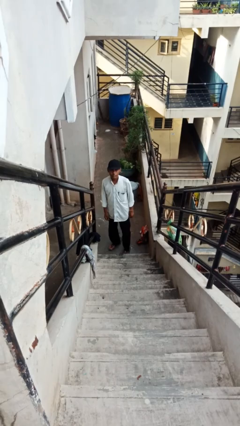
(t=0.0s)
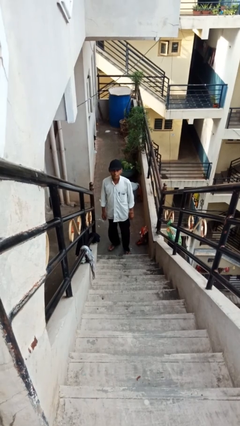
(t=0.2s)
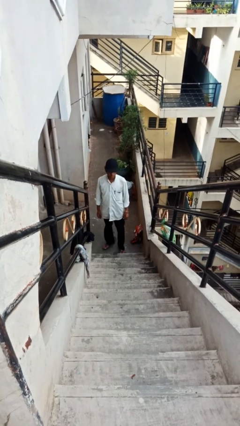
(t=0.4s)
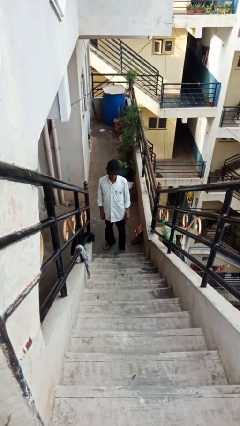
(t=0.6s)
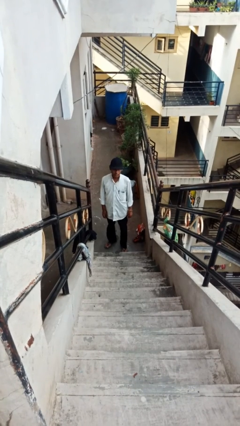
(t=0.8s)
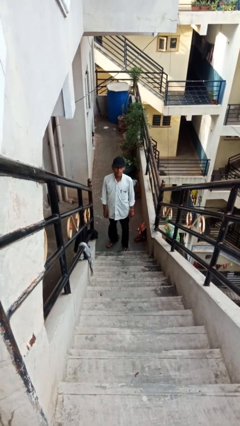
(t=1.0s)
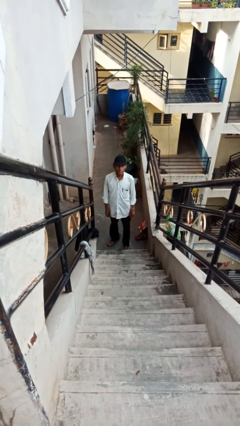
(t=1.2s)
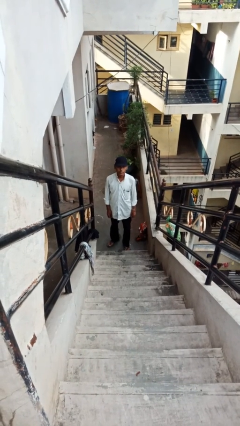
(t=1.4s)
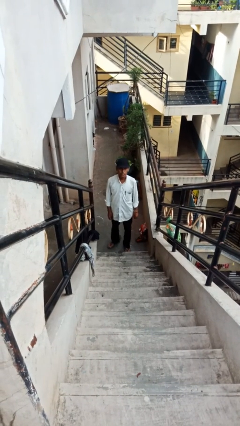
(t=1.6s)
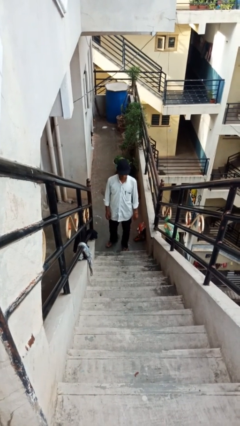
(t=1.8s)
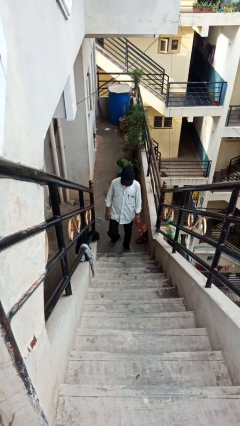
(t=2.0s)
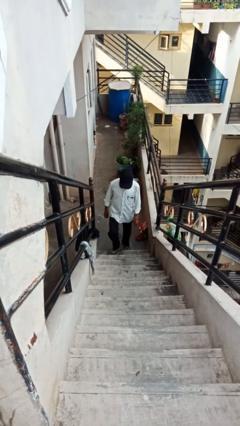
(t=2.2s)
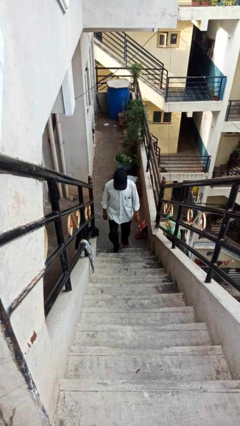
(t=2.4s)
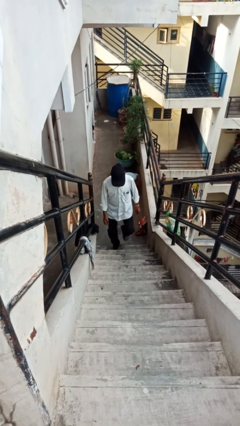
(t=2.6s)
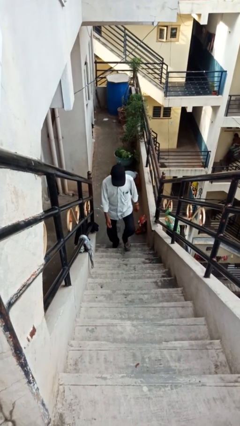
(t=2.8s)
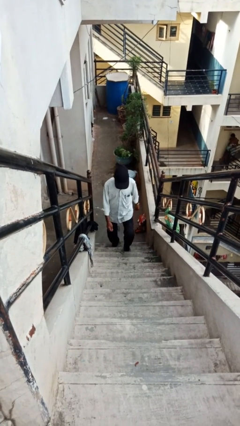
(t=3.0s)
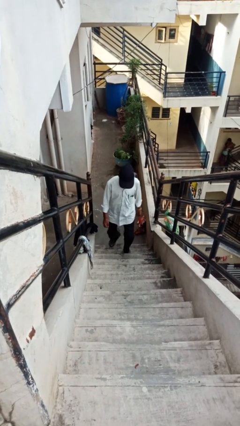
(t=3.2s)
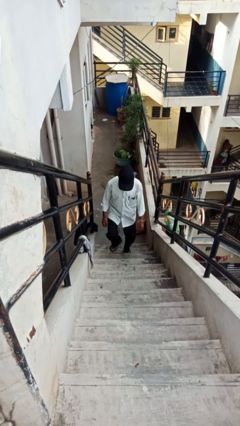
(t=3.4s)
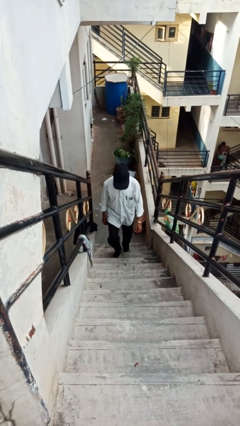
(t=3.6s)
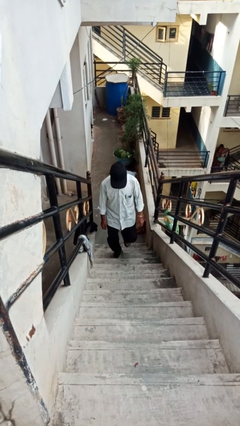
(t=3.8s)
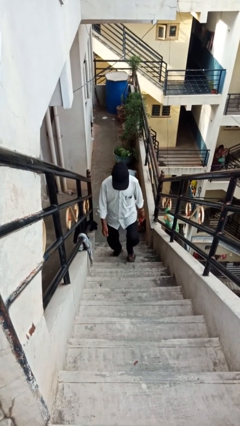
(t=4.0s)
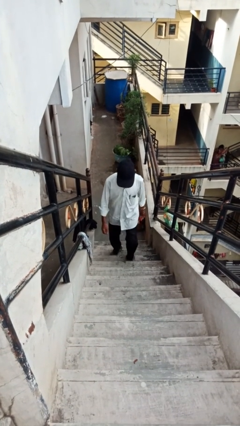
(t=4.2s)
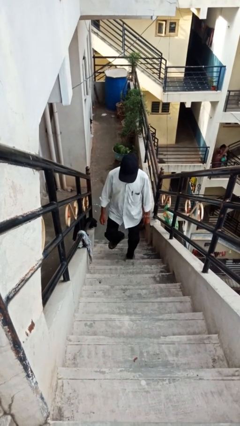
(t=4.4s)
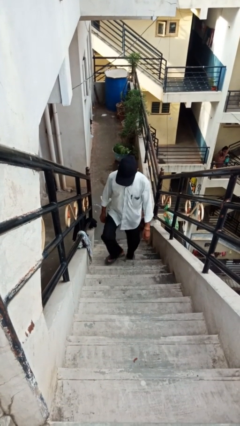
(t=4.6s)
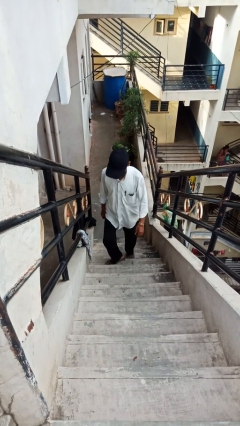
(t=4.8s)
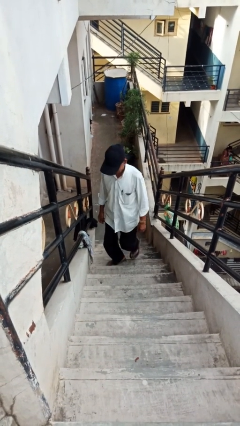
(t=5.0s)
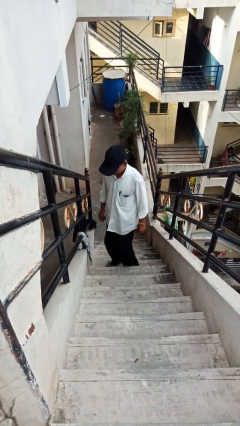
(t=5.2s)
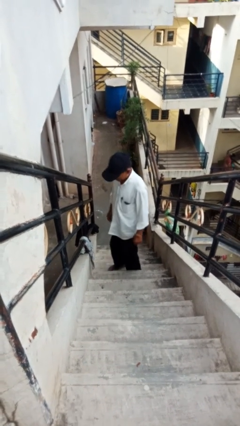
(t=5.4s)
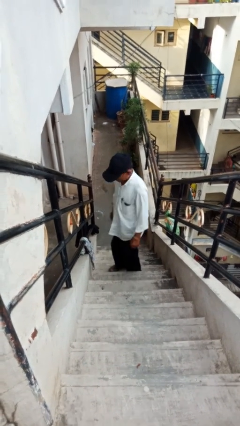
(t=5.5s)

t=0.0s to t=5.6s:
person climbs up stairs

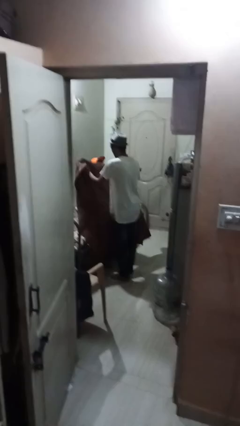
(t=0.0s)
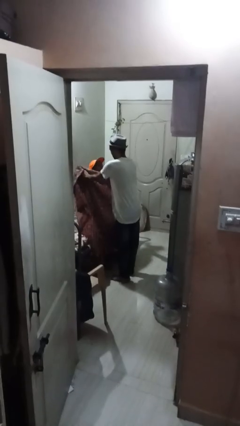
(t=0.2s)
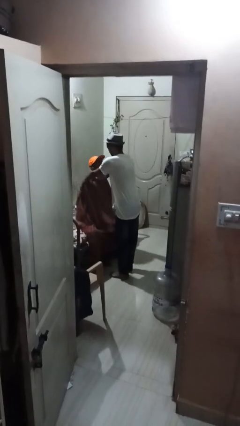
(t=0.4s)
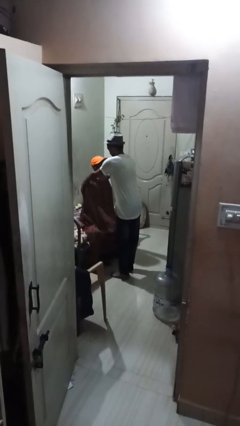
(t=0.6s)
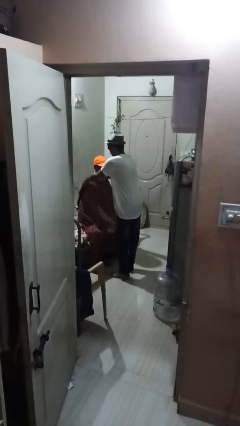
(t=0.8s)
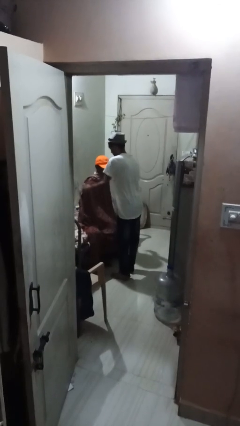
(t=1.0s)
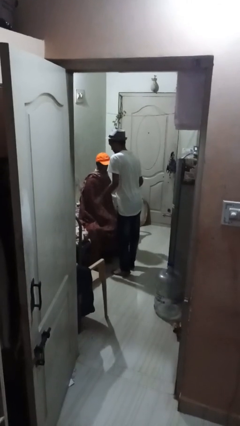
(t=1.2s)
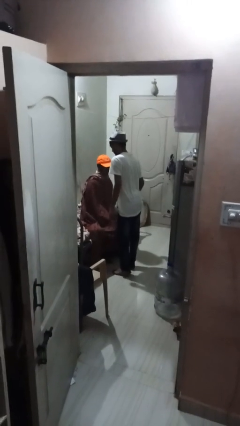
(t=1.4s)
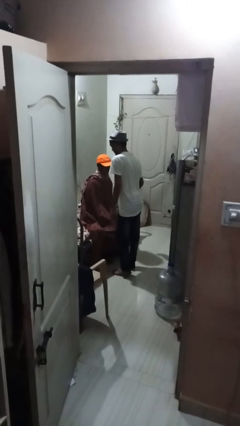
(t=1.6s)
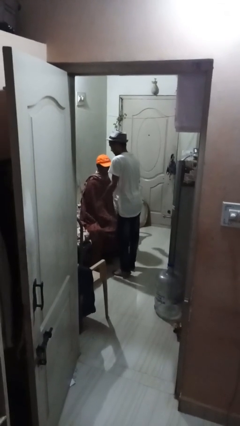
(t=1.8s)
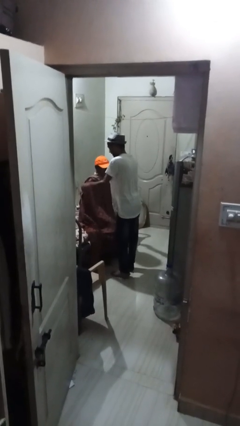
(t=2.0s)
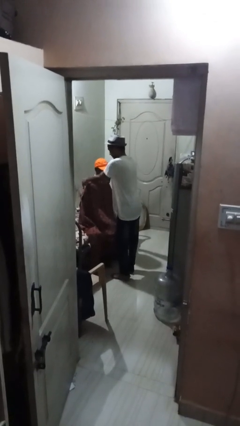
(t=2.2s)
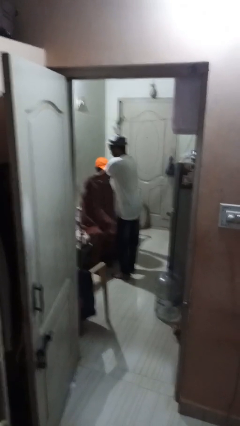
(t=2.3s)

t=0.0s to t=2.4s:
person covers friend with blanket

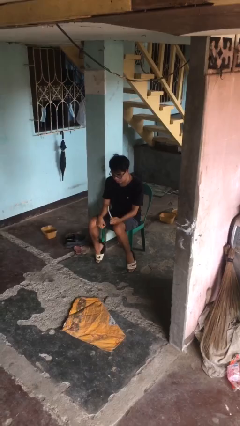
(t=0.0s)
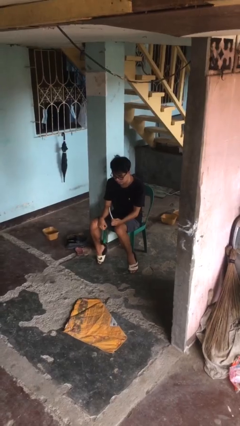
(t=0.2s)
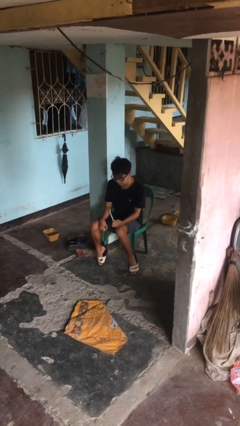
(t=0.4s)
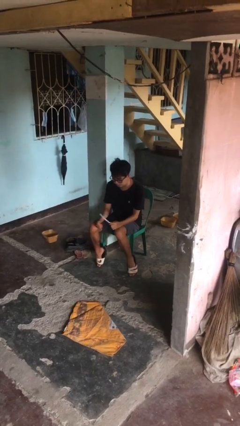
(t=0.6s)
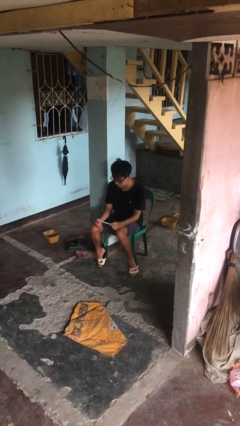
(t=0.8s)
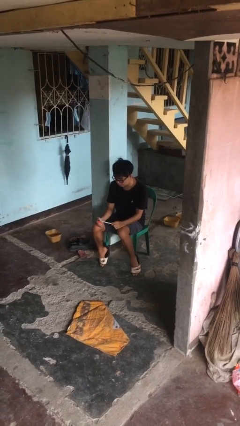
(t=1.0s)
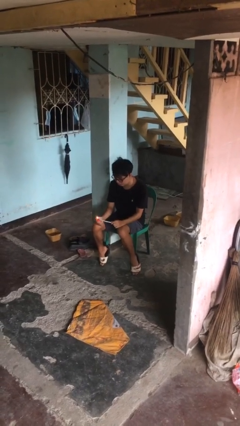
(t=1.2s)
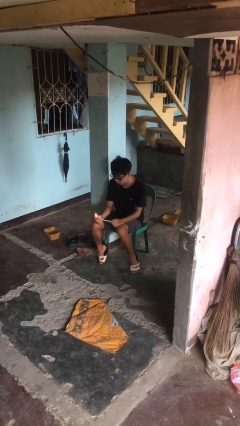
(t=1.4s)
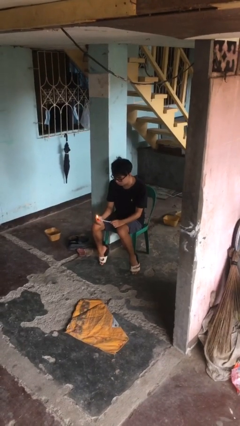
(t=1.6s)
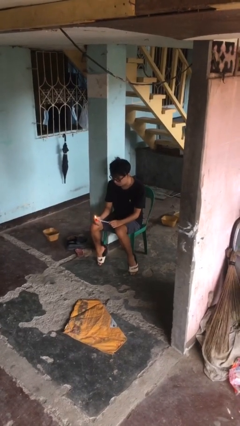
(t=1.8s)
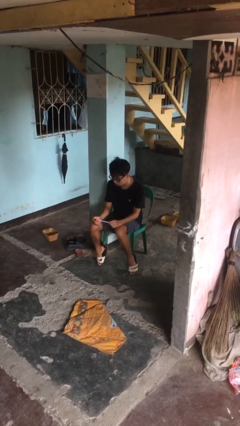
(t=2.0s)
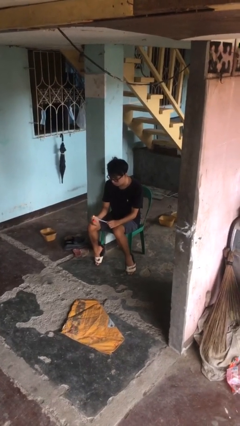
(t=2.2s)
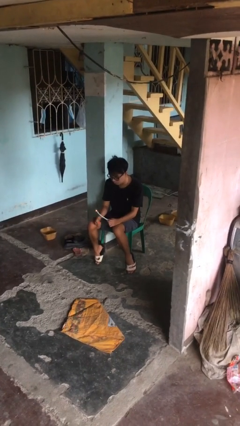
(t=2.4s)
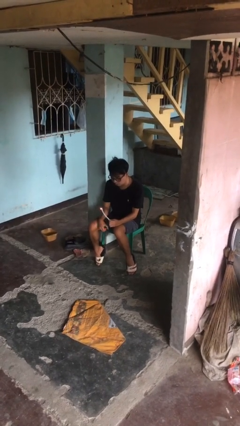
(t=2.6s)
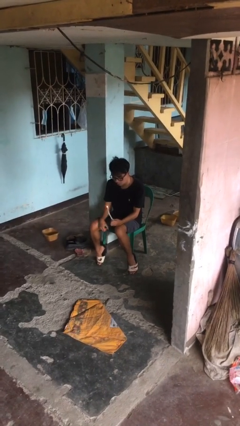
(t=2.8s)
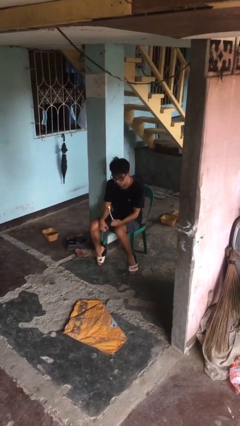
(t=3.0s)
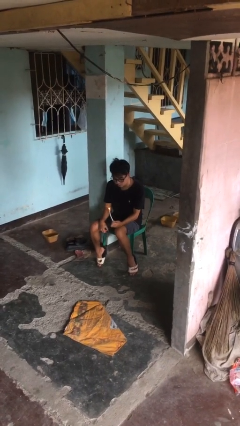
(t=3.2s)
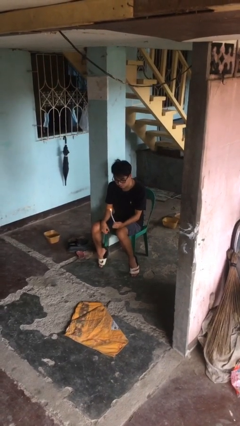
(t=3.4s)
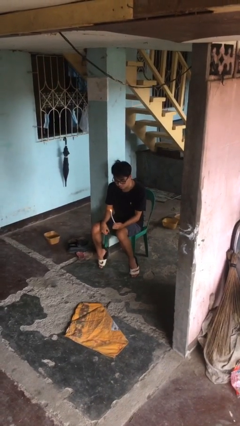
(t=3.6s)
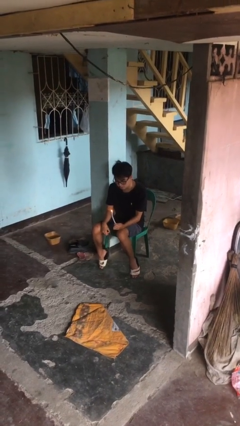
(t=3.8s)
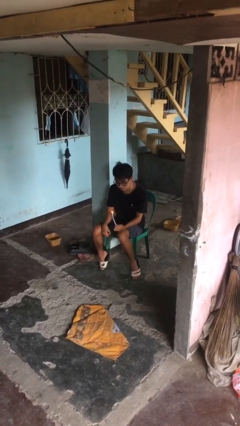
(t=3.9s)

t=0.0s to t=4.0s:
person lights candle

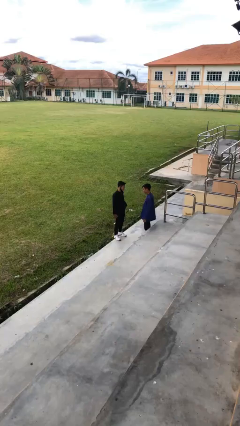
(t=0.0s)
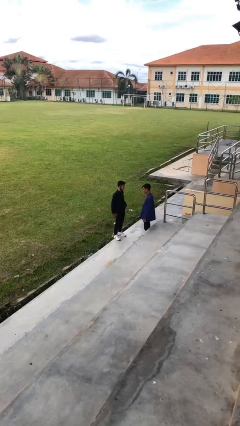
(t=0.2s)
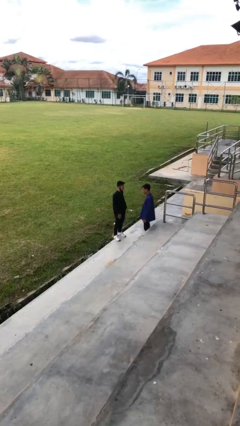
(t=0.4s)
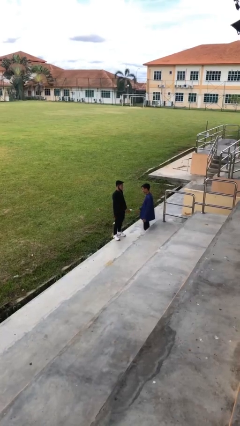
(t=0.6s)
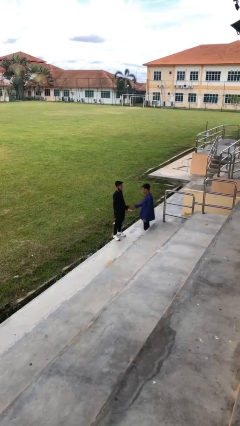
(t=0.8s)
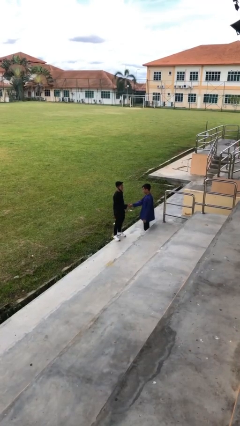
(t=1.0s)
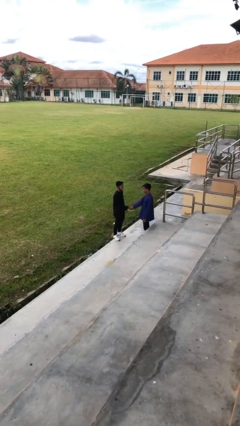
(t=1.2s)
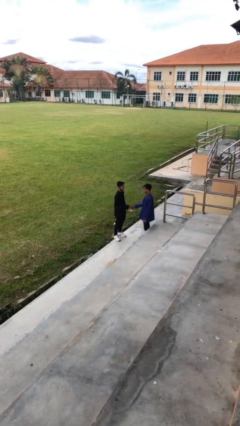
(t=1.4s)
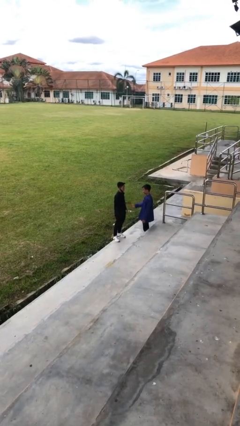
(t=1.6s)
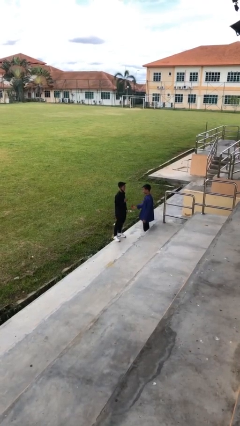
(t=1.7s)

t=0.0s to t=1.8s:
person shakes hand

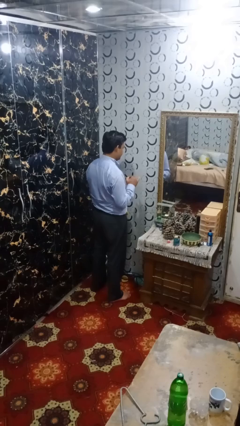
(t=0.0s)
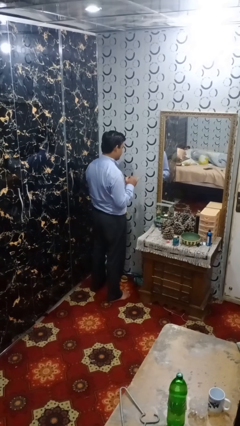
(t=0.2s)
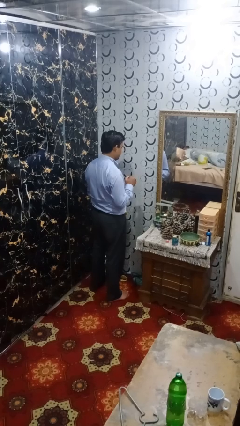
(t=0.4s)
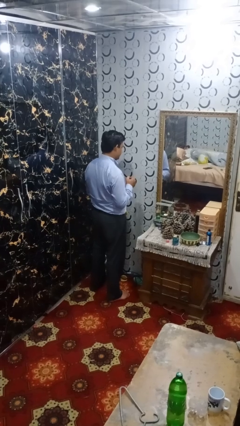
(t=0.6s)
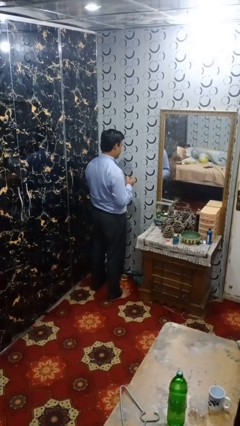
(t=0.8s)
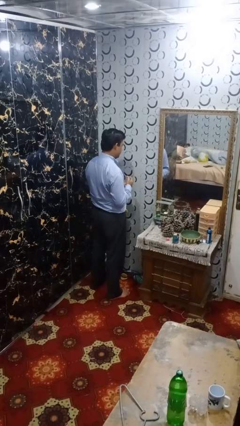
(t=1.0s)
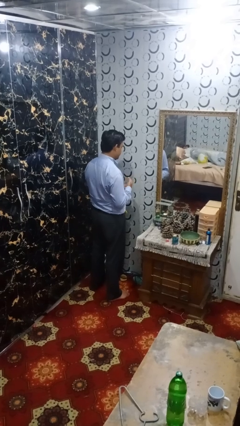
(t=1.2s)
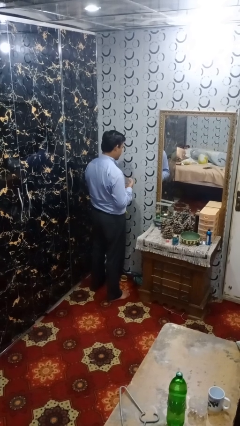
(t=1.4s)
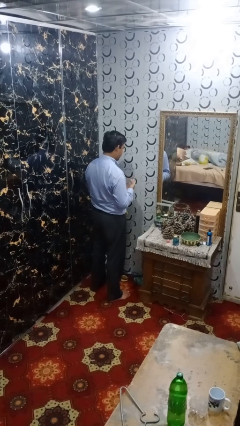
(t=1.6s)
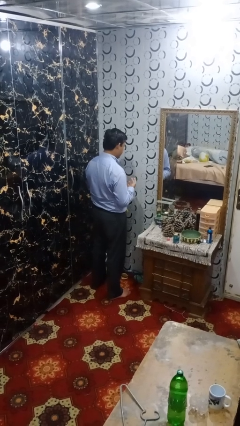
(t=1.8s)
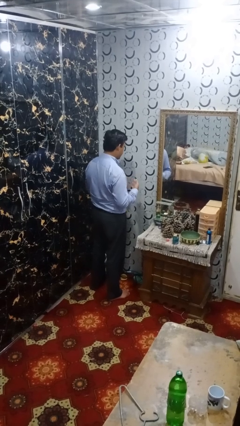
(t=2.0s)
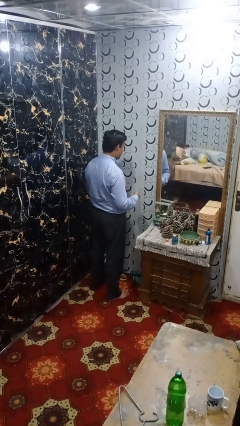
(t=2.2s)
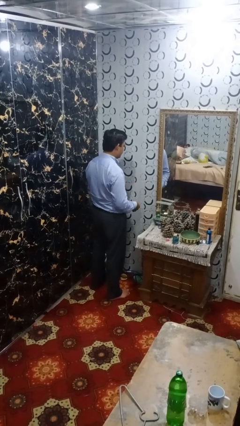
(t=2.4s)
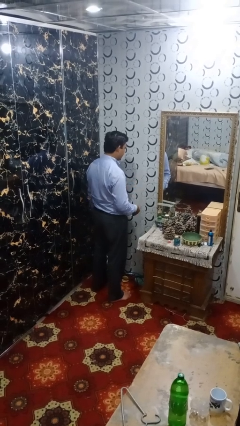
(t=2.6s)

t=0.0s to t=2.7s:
person takes off ring

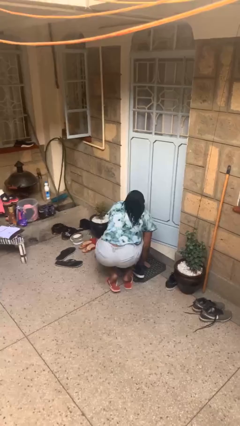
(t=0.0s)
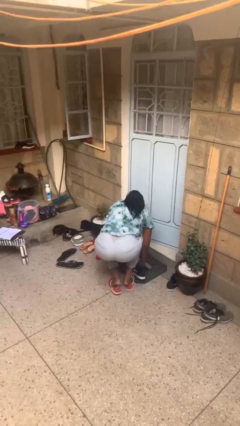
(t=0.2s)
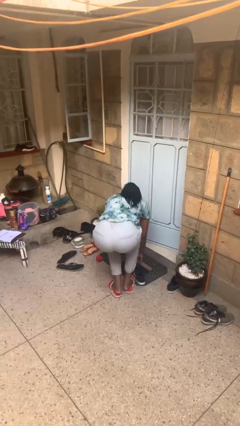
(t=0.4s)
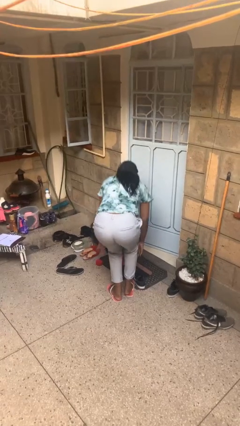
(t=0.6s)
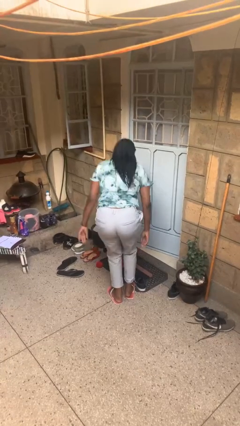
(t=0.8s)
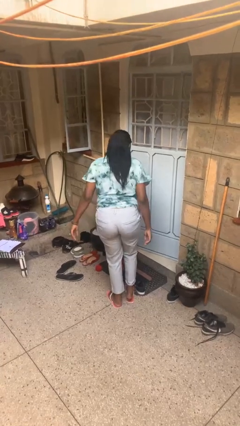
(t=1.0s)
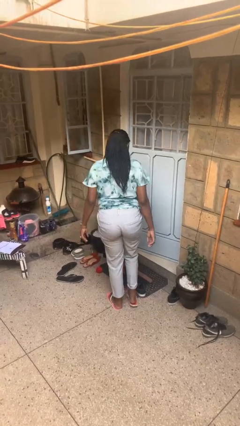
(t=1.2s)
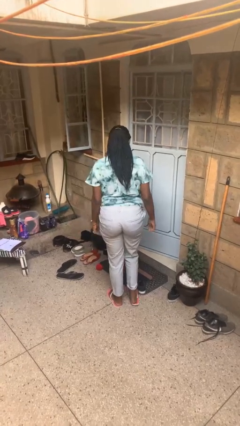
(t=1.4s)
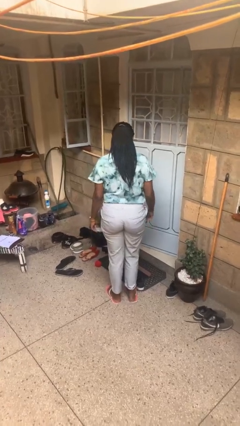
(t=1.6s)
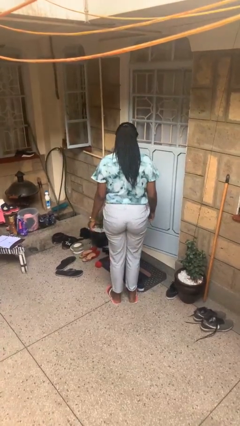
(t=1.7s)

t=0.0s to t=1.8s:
person stands up from floor
